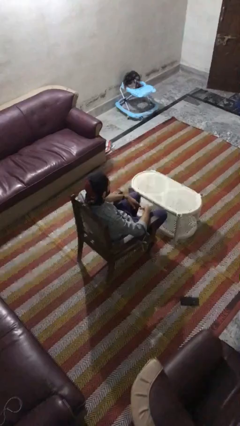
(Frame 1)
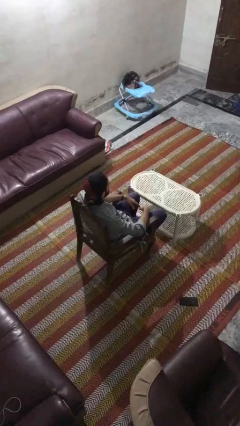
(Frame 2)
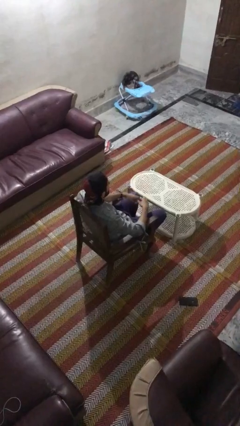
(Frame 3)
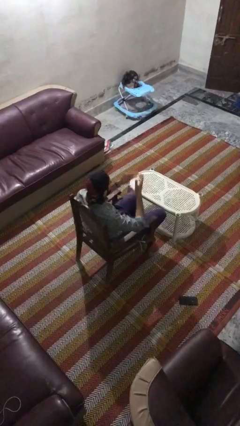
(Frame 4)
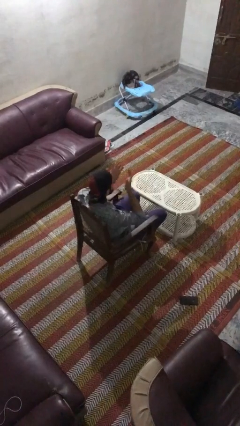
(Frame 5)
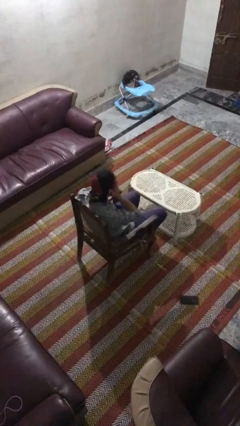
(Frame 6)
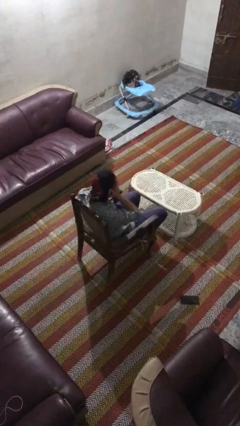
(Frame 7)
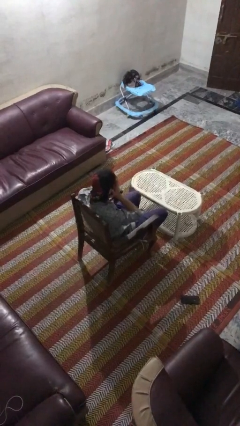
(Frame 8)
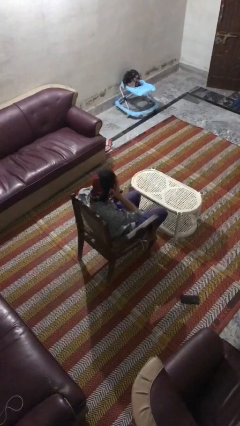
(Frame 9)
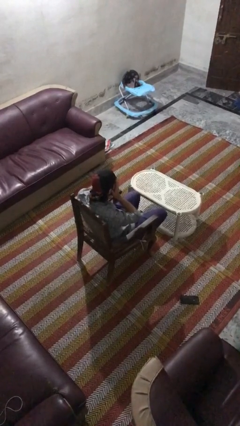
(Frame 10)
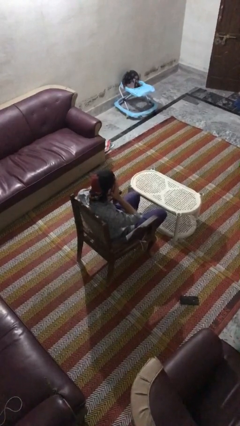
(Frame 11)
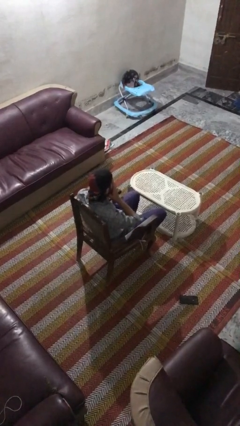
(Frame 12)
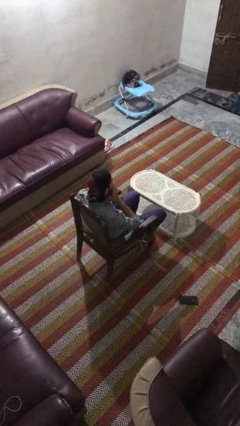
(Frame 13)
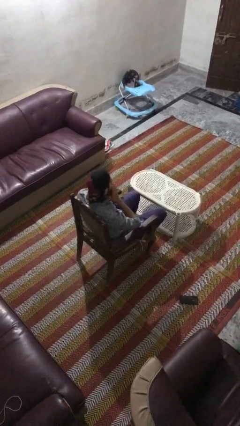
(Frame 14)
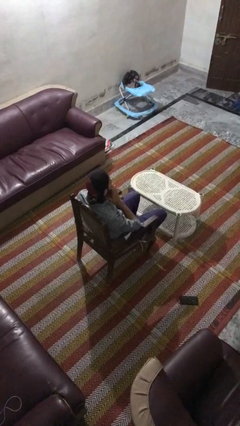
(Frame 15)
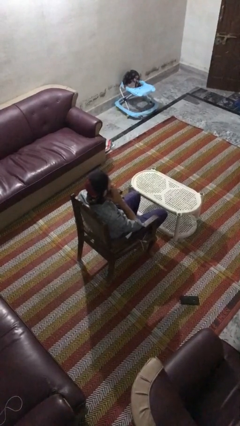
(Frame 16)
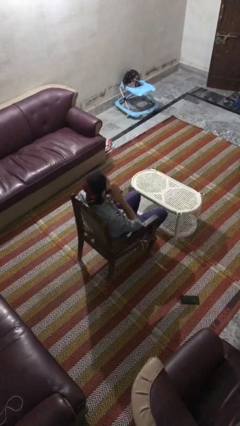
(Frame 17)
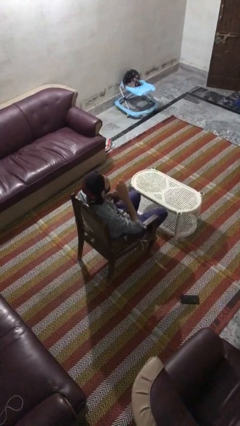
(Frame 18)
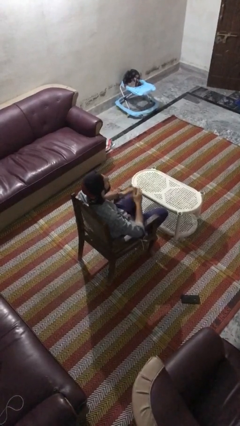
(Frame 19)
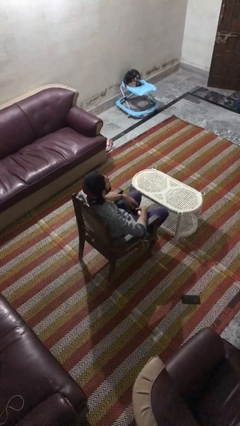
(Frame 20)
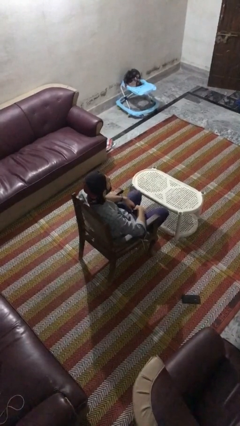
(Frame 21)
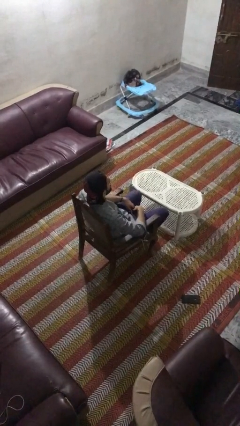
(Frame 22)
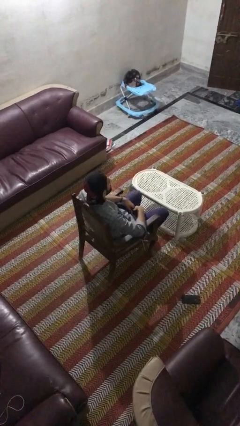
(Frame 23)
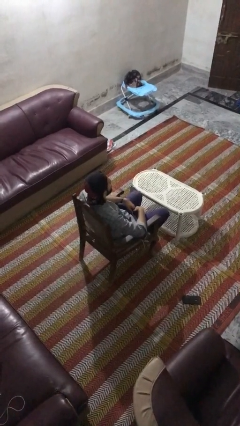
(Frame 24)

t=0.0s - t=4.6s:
person covers face with hands

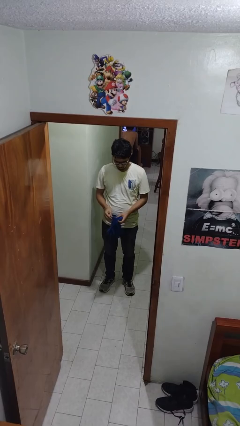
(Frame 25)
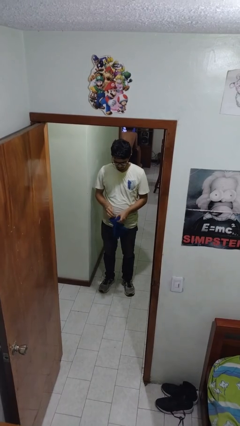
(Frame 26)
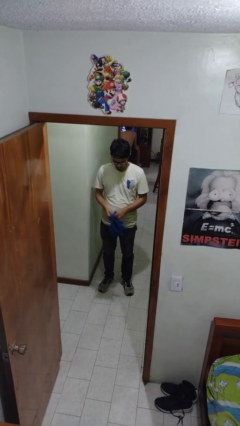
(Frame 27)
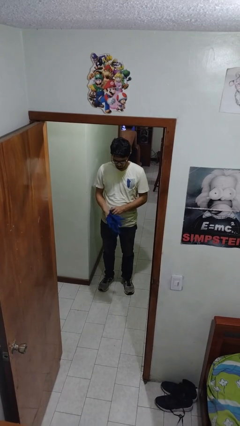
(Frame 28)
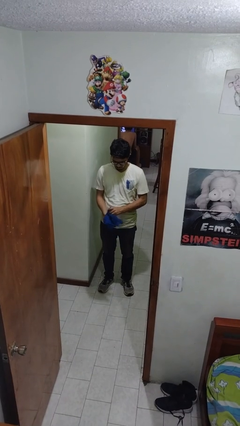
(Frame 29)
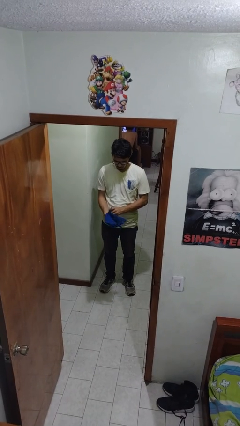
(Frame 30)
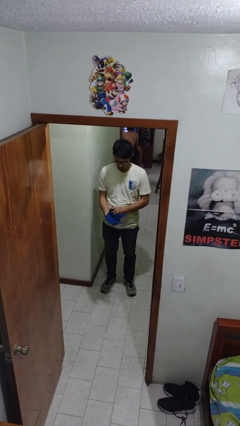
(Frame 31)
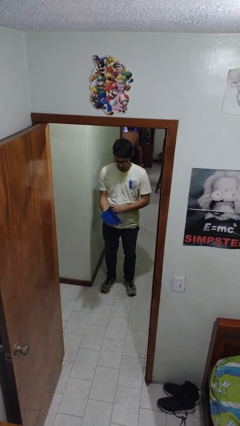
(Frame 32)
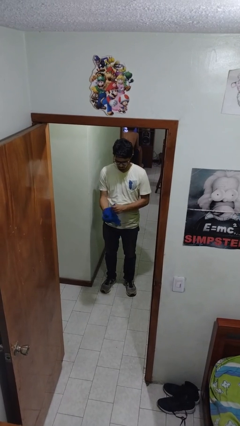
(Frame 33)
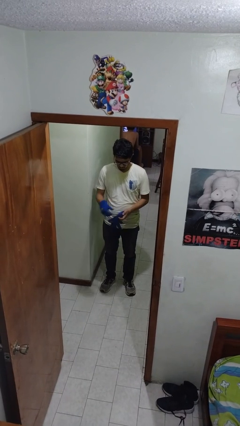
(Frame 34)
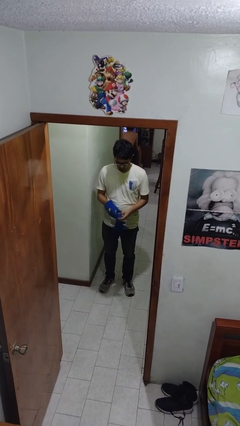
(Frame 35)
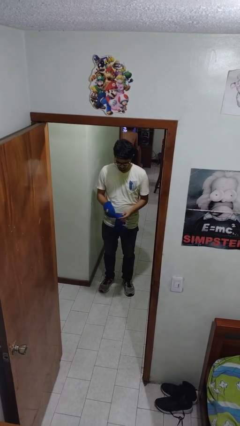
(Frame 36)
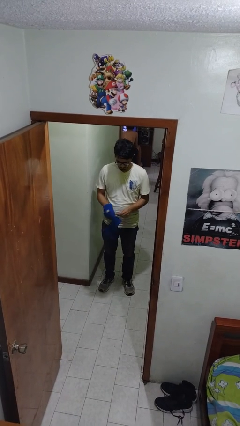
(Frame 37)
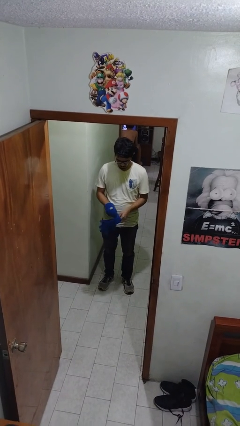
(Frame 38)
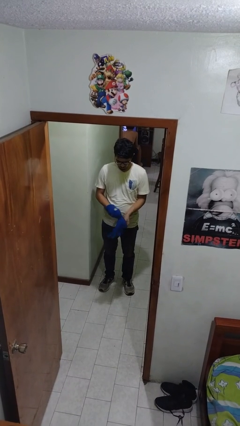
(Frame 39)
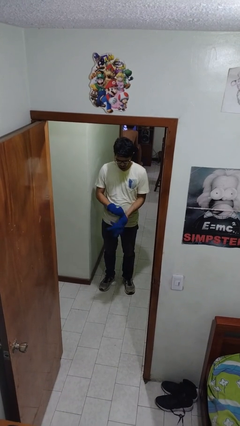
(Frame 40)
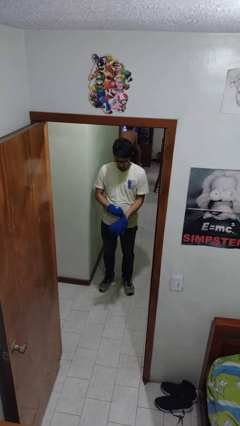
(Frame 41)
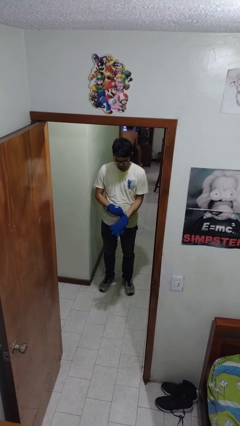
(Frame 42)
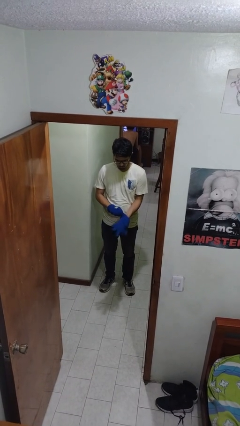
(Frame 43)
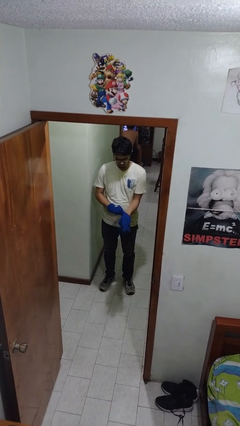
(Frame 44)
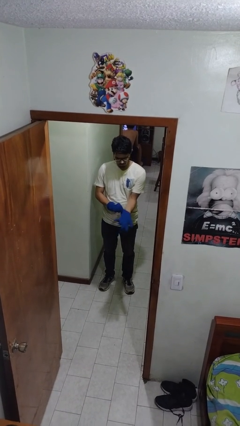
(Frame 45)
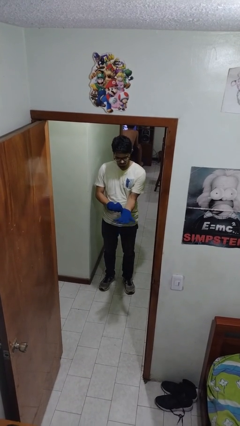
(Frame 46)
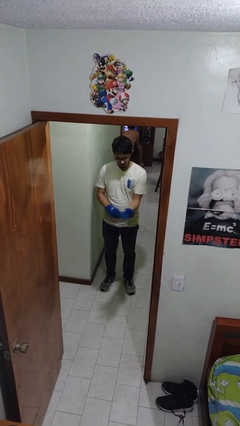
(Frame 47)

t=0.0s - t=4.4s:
person puts on gloves

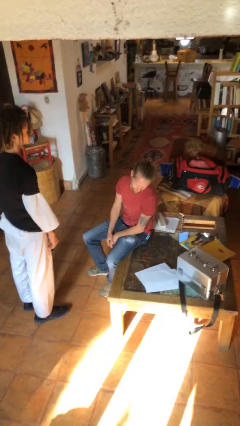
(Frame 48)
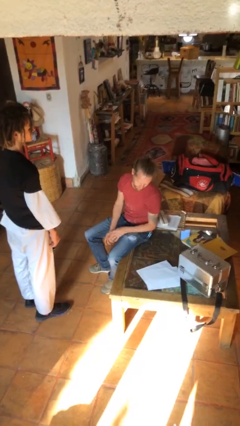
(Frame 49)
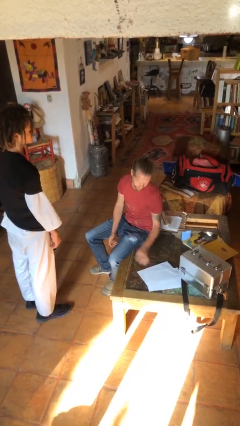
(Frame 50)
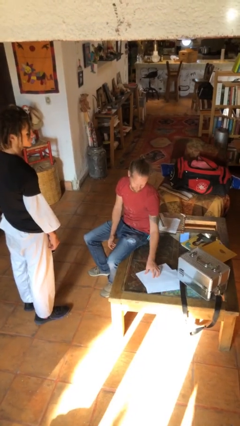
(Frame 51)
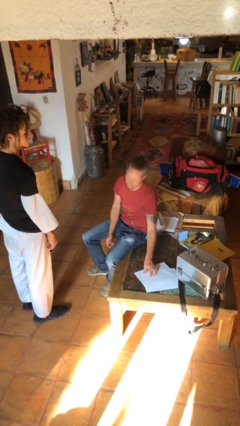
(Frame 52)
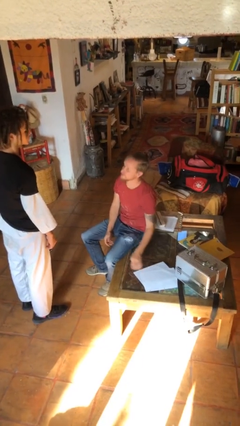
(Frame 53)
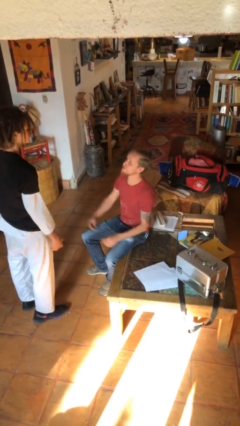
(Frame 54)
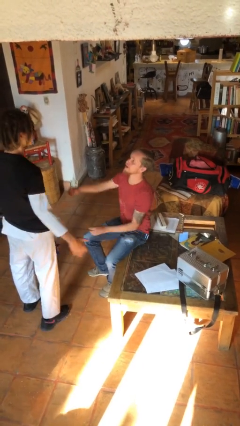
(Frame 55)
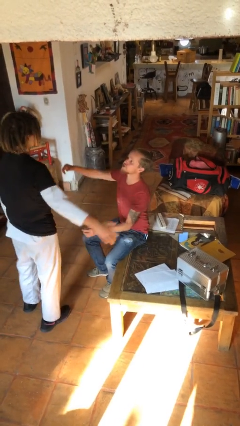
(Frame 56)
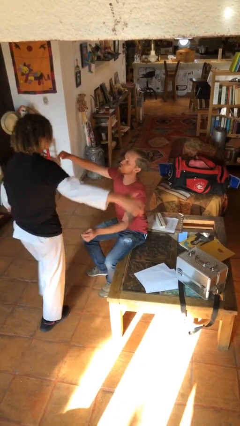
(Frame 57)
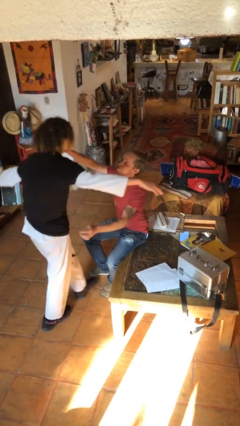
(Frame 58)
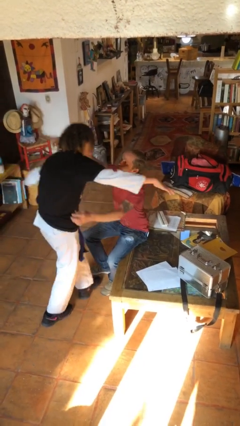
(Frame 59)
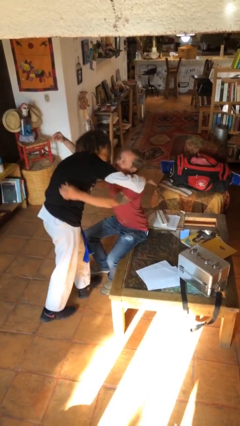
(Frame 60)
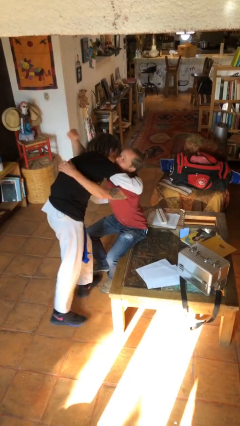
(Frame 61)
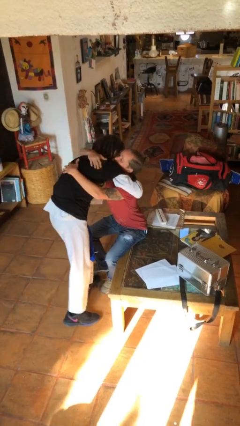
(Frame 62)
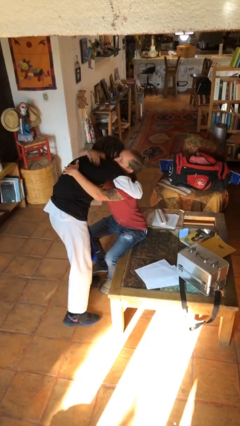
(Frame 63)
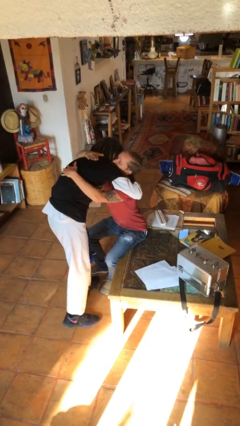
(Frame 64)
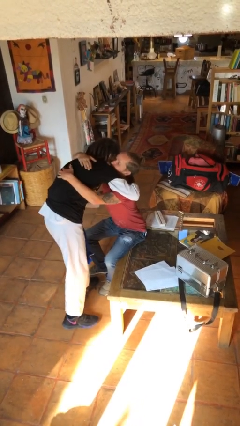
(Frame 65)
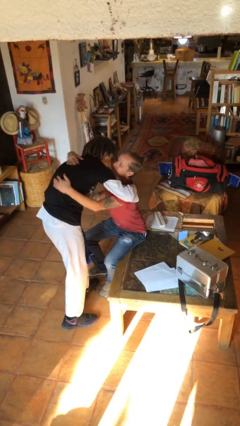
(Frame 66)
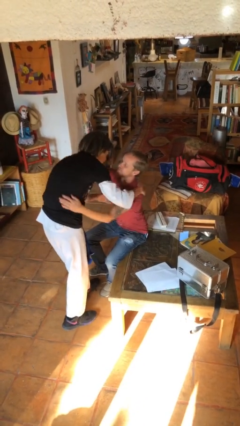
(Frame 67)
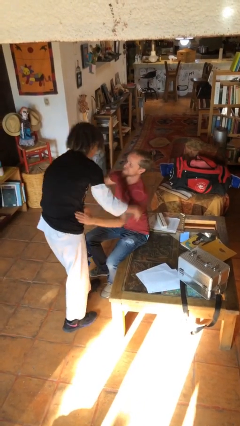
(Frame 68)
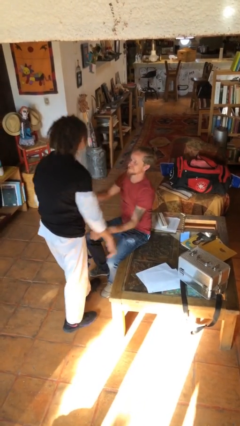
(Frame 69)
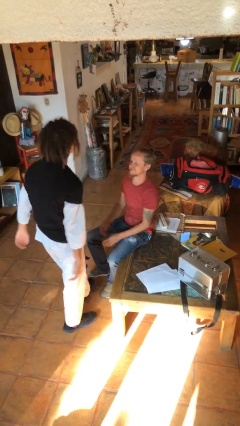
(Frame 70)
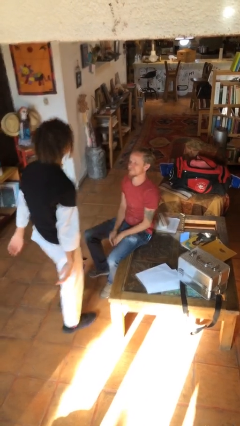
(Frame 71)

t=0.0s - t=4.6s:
person embraces person

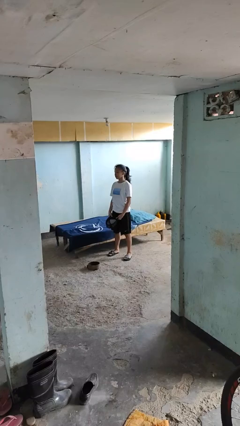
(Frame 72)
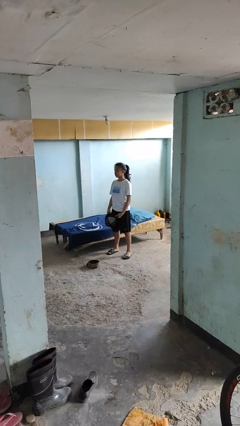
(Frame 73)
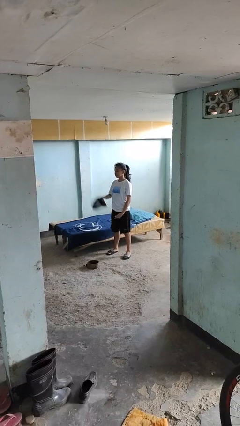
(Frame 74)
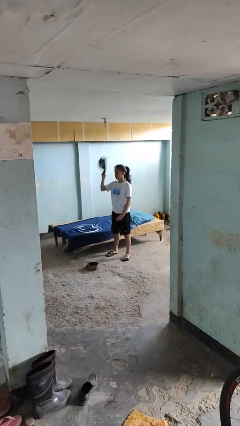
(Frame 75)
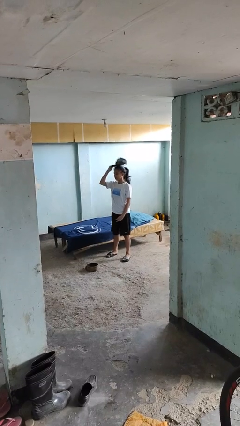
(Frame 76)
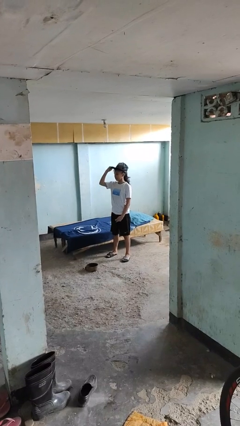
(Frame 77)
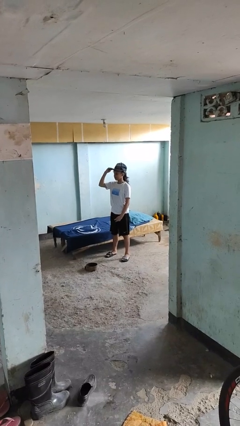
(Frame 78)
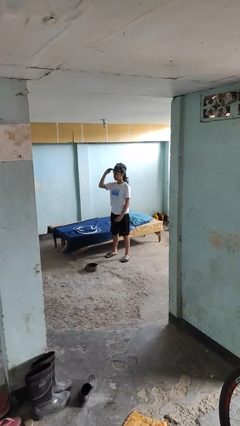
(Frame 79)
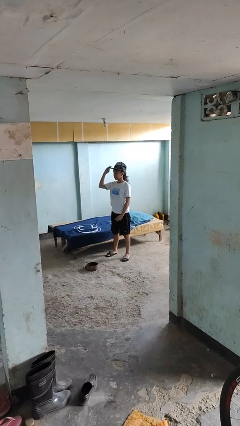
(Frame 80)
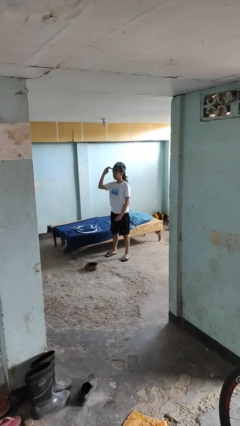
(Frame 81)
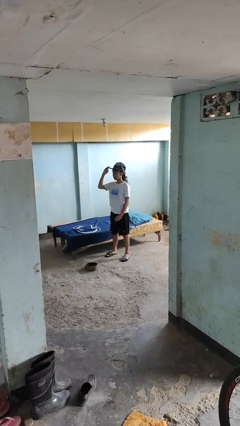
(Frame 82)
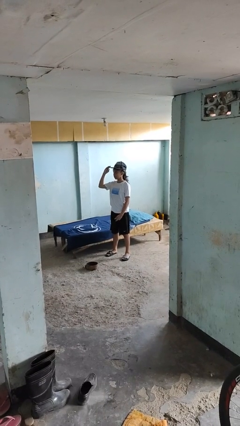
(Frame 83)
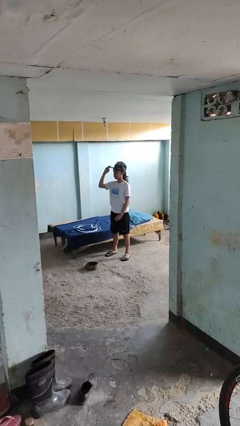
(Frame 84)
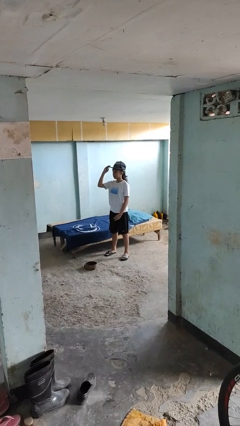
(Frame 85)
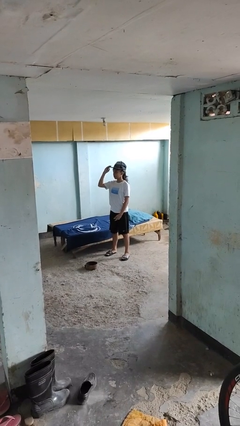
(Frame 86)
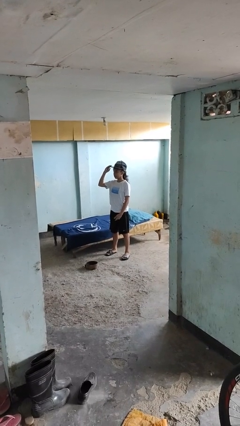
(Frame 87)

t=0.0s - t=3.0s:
person puts on hat

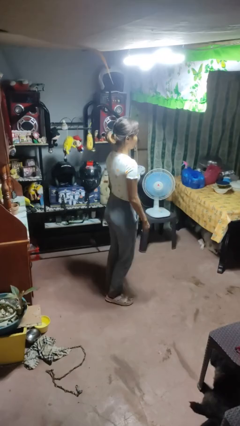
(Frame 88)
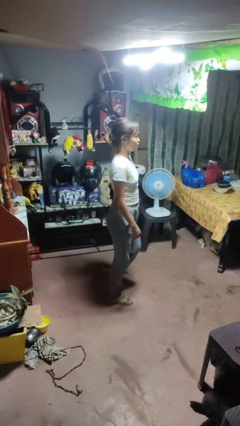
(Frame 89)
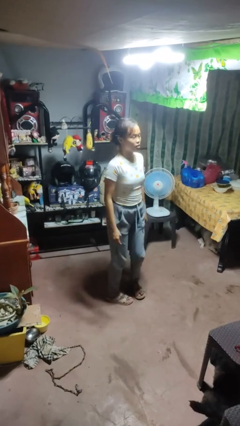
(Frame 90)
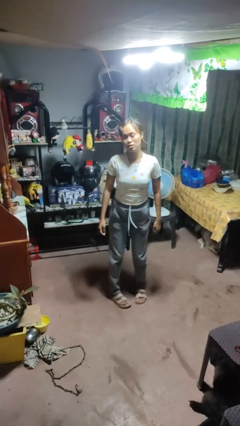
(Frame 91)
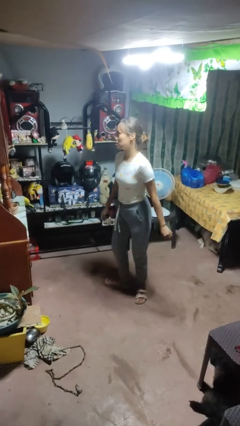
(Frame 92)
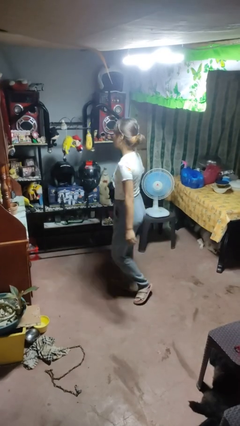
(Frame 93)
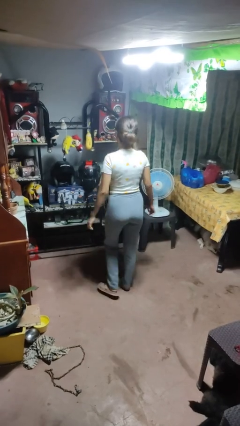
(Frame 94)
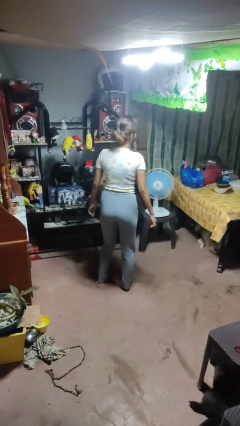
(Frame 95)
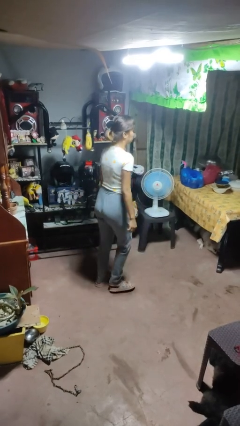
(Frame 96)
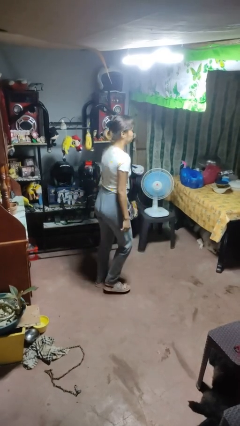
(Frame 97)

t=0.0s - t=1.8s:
person twirls
